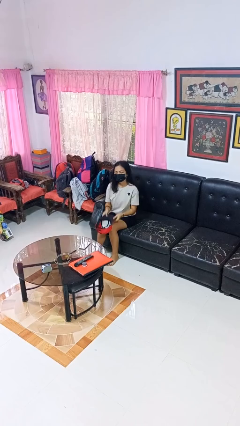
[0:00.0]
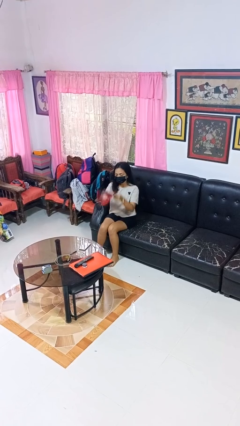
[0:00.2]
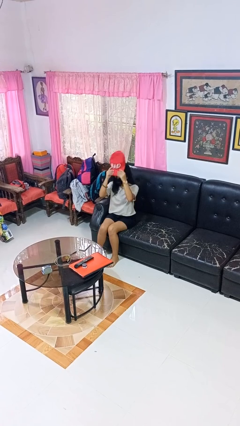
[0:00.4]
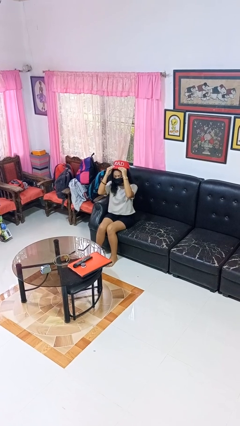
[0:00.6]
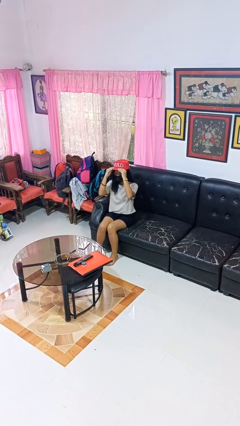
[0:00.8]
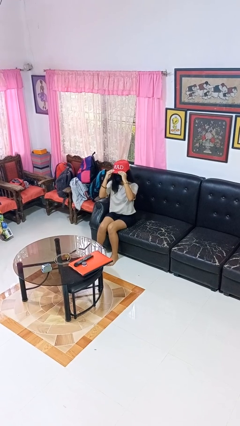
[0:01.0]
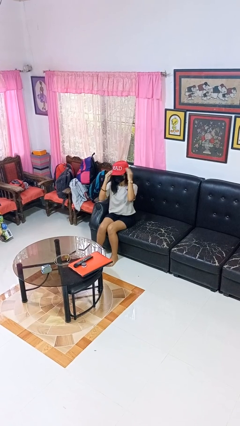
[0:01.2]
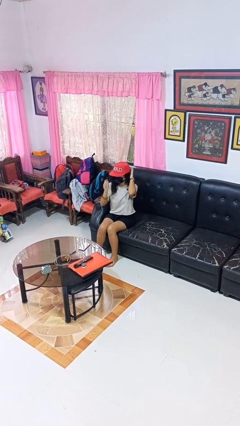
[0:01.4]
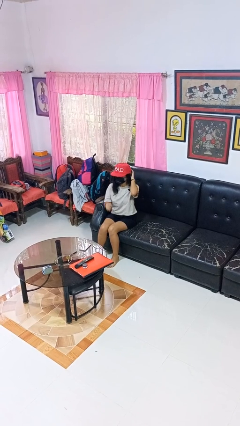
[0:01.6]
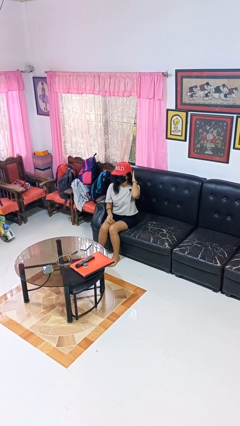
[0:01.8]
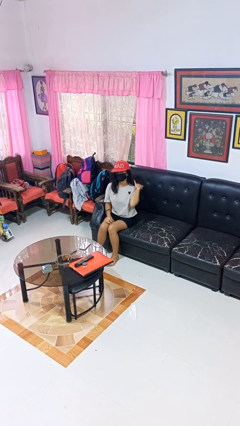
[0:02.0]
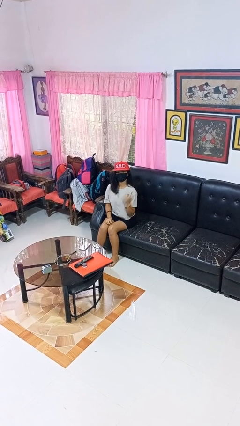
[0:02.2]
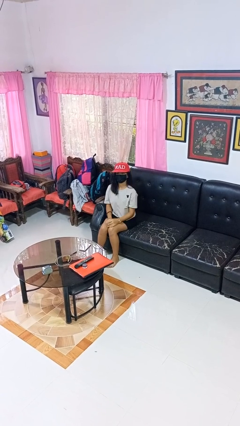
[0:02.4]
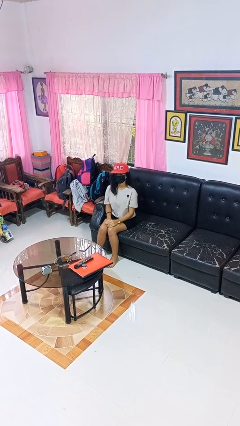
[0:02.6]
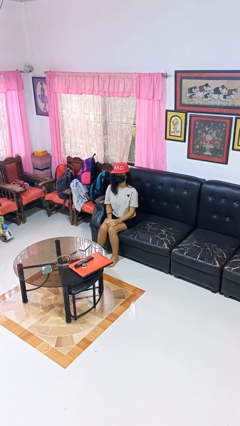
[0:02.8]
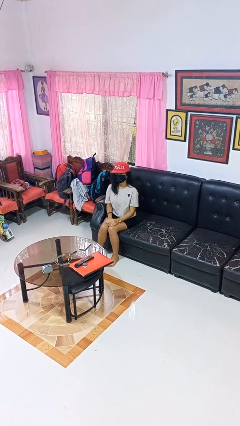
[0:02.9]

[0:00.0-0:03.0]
person puts on hat

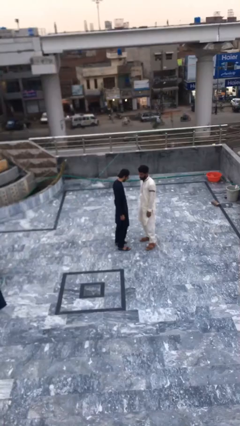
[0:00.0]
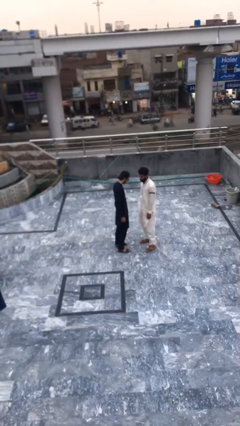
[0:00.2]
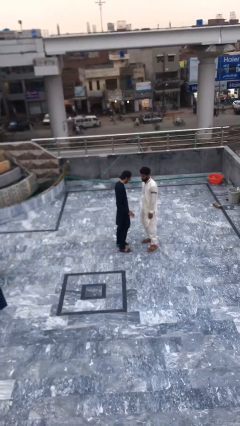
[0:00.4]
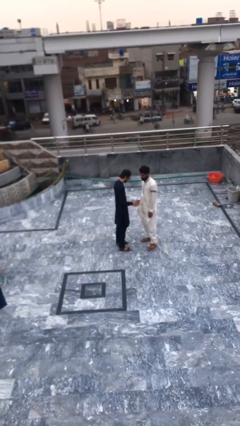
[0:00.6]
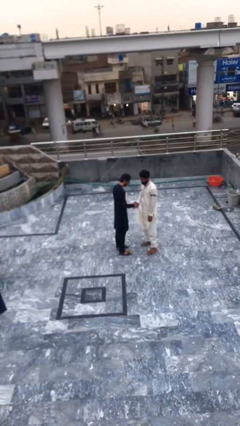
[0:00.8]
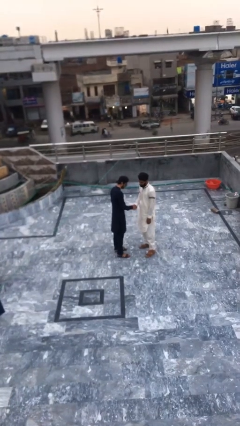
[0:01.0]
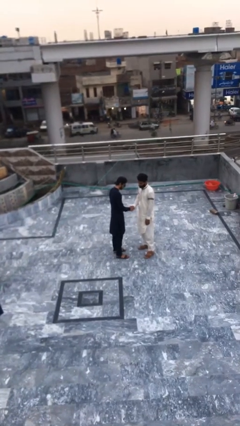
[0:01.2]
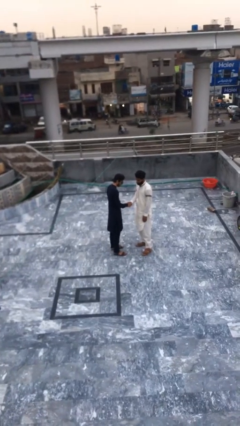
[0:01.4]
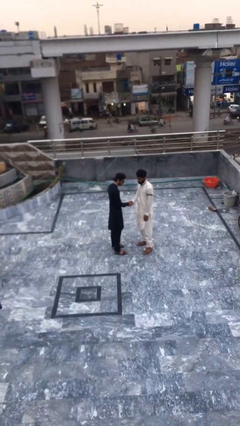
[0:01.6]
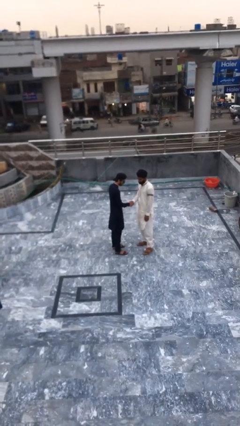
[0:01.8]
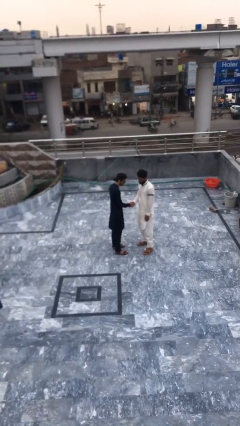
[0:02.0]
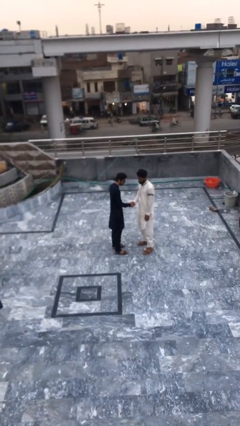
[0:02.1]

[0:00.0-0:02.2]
person shakes hand

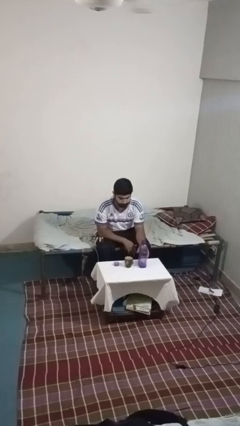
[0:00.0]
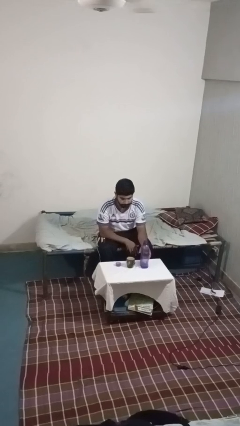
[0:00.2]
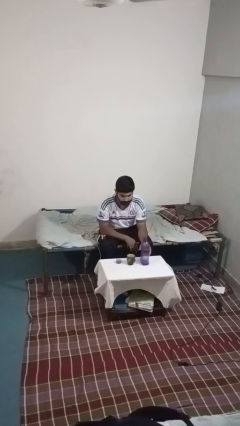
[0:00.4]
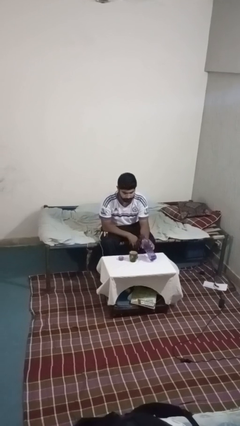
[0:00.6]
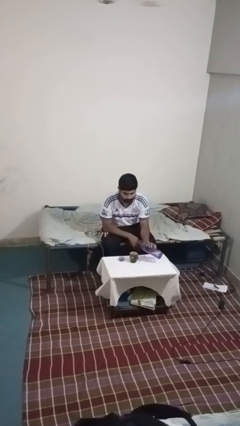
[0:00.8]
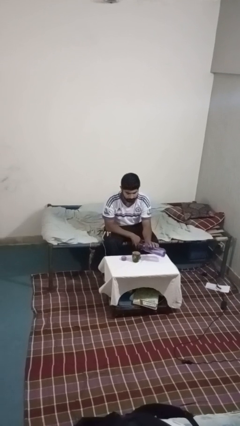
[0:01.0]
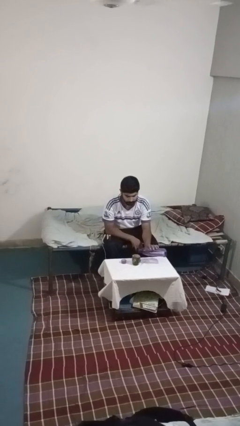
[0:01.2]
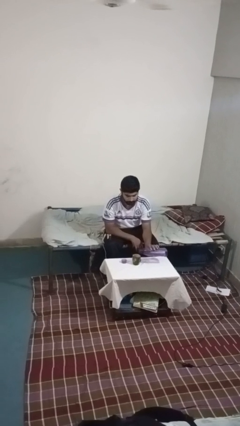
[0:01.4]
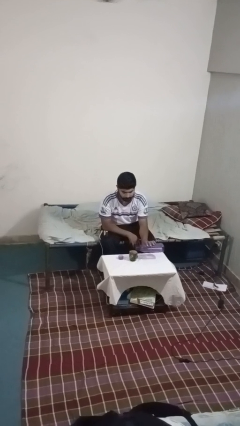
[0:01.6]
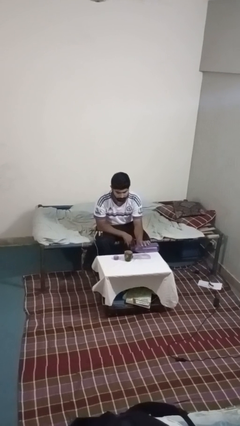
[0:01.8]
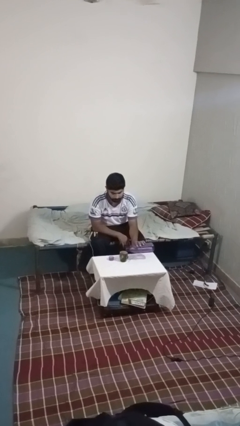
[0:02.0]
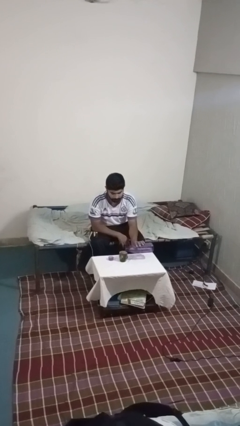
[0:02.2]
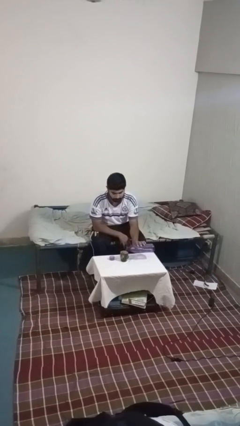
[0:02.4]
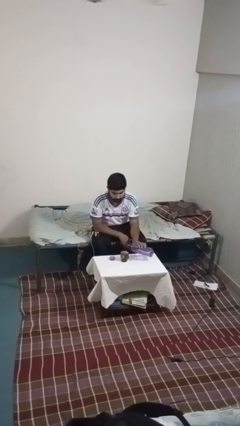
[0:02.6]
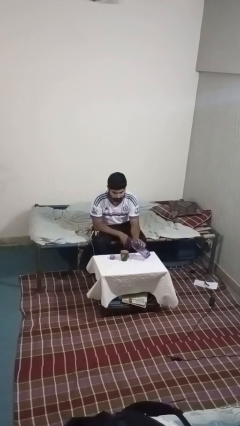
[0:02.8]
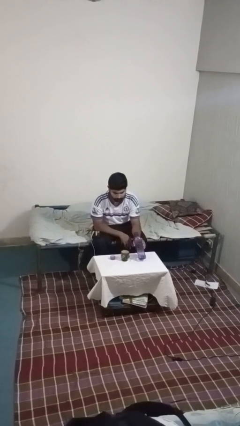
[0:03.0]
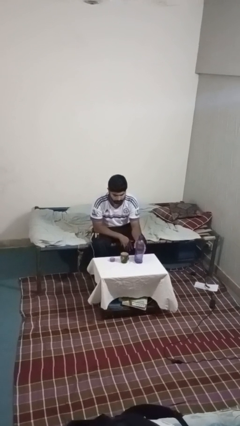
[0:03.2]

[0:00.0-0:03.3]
person pours liquid into cup

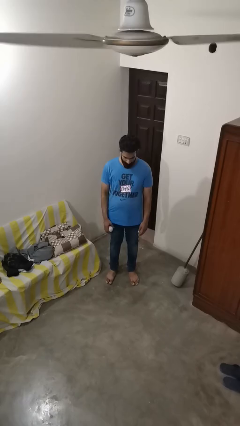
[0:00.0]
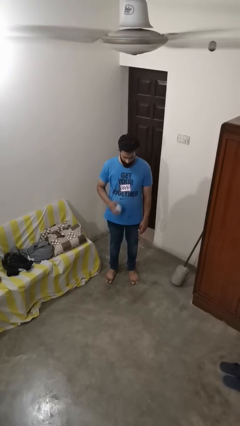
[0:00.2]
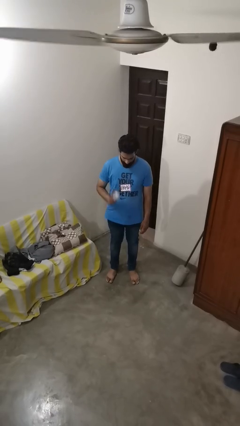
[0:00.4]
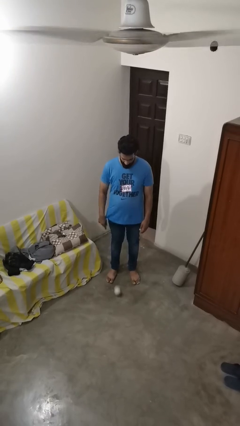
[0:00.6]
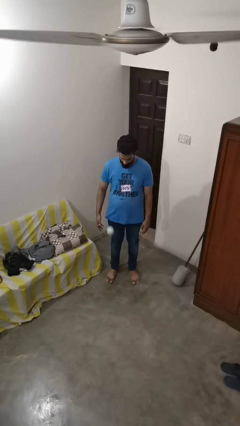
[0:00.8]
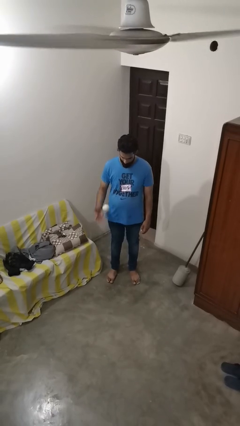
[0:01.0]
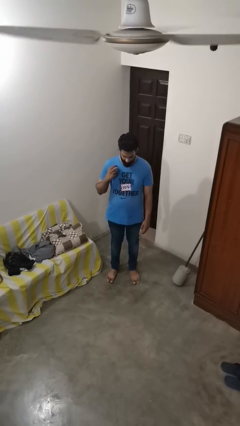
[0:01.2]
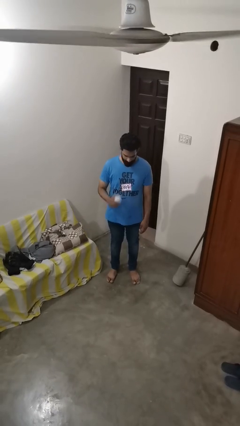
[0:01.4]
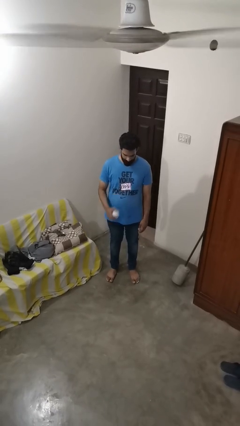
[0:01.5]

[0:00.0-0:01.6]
person bounces ball on floor

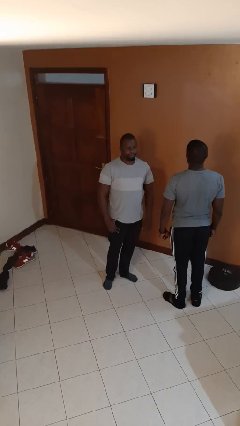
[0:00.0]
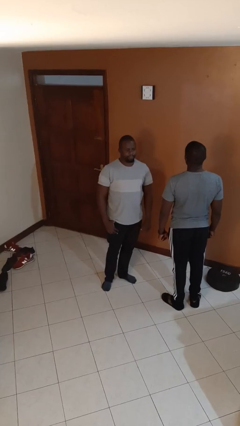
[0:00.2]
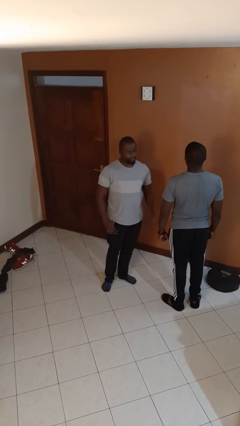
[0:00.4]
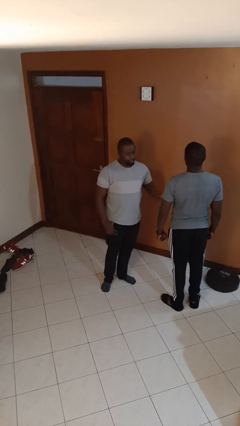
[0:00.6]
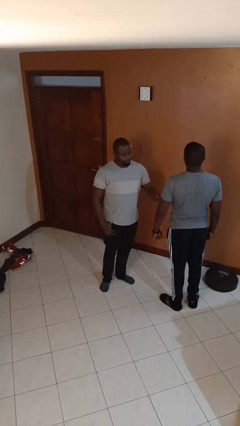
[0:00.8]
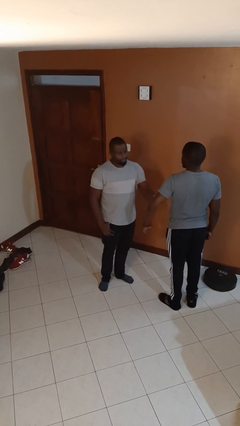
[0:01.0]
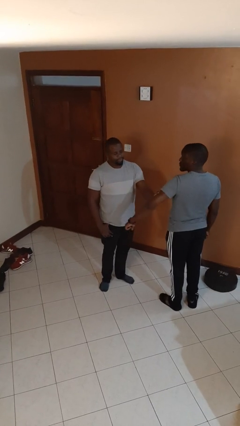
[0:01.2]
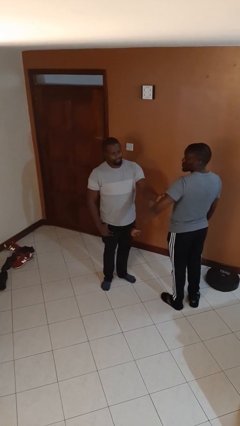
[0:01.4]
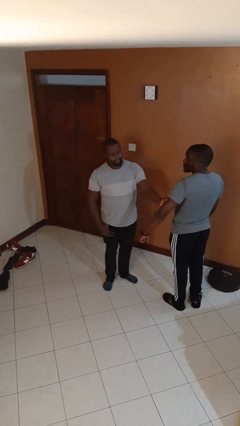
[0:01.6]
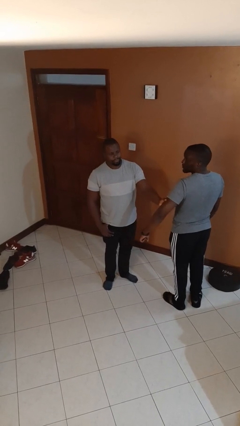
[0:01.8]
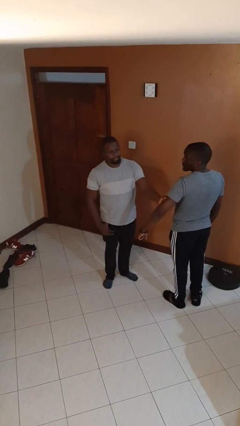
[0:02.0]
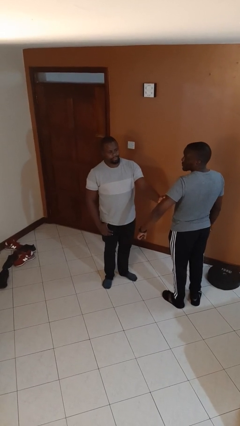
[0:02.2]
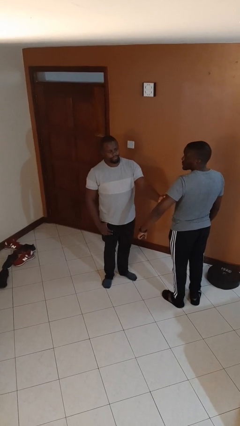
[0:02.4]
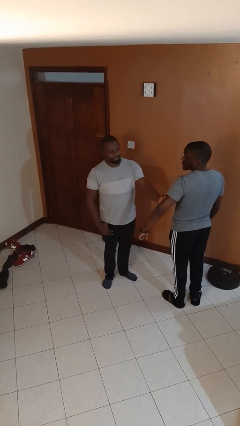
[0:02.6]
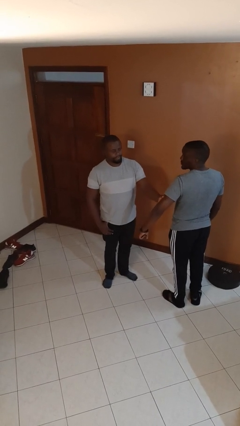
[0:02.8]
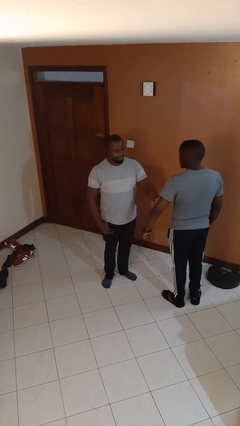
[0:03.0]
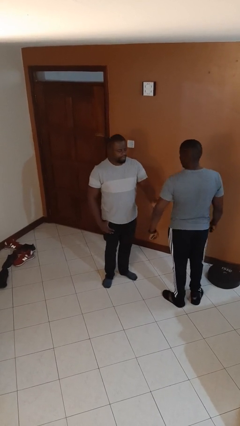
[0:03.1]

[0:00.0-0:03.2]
person grabs person by bicep

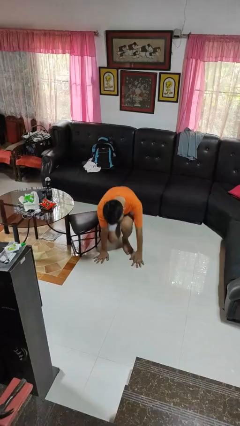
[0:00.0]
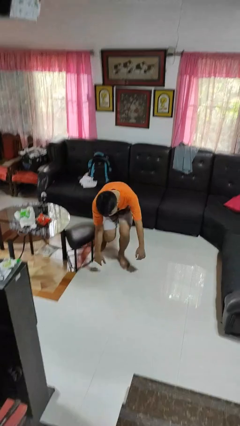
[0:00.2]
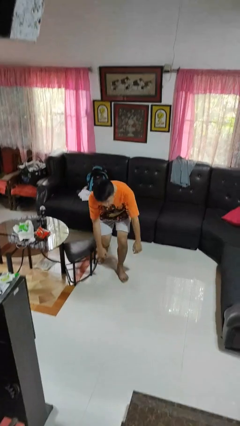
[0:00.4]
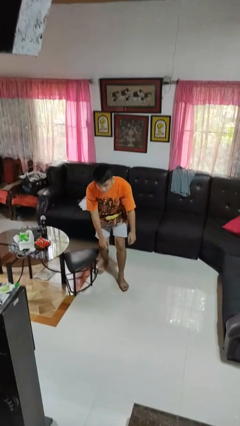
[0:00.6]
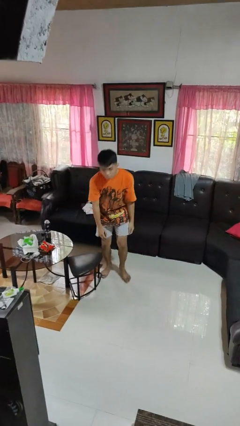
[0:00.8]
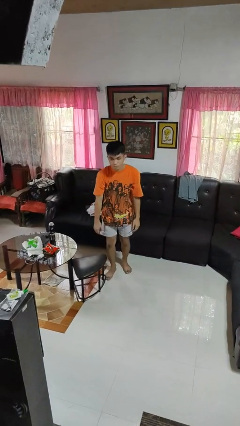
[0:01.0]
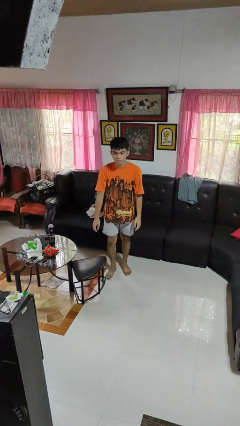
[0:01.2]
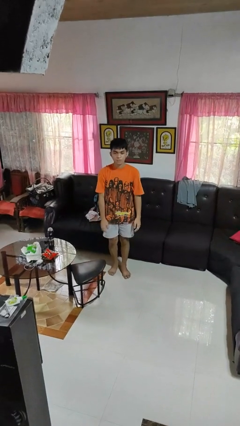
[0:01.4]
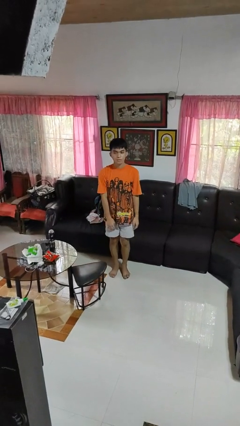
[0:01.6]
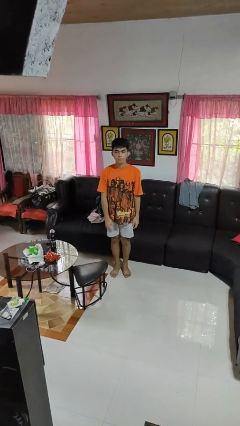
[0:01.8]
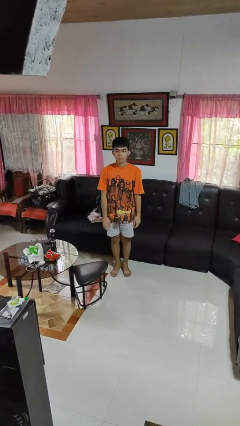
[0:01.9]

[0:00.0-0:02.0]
person stands up from floor

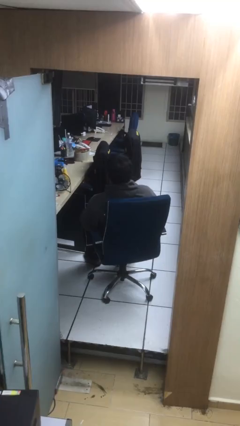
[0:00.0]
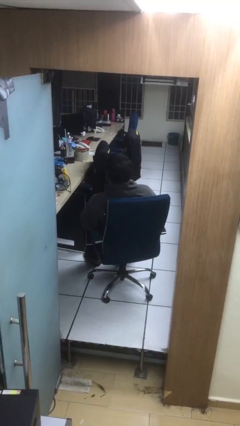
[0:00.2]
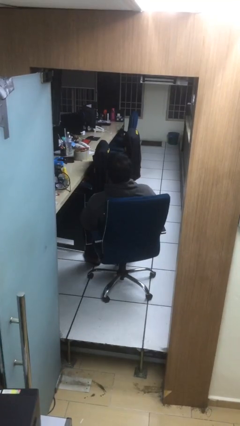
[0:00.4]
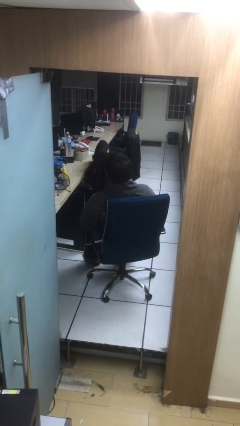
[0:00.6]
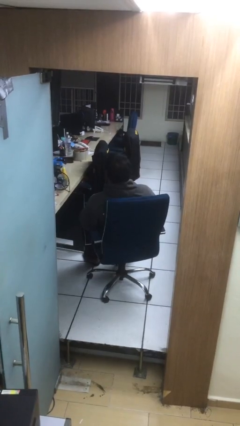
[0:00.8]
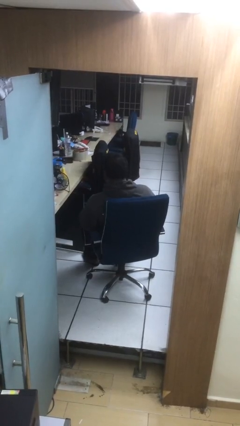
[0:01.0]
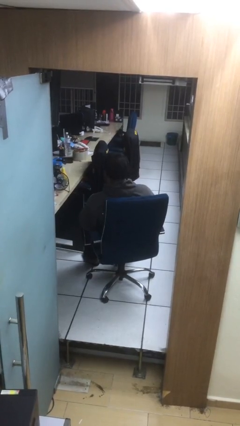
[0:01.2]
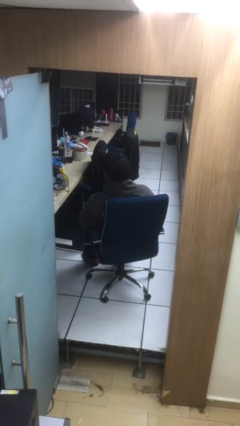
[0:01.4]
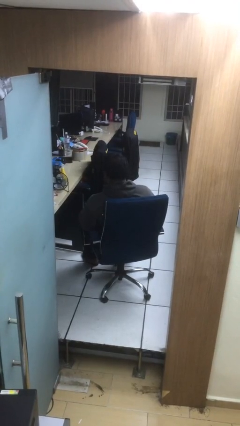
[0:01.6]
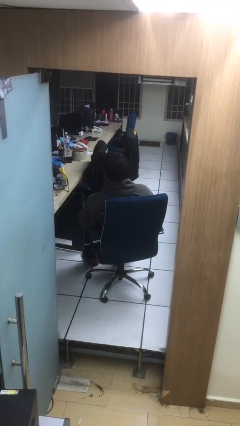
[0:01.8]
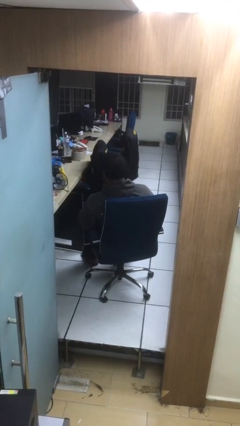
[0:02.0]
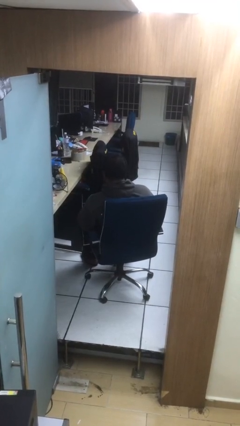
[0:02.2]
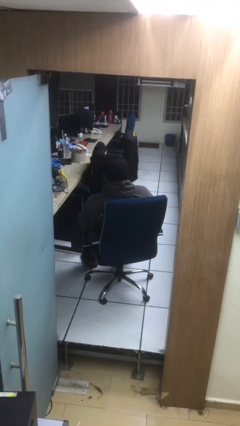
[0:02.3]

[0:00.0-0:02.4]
person nods head
